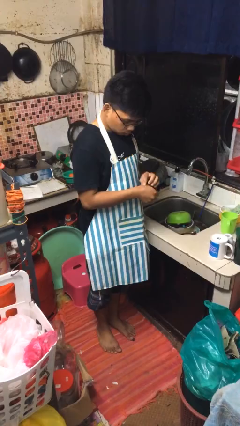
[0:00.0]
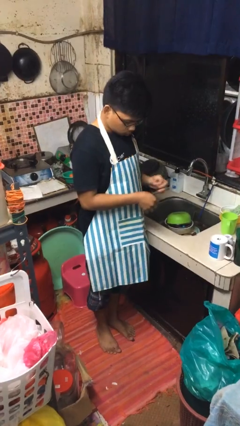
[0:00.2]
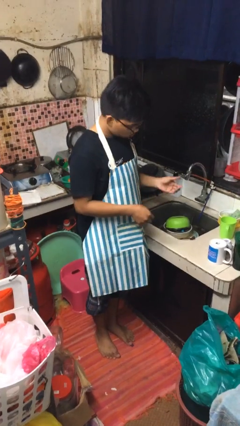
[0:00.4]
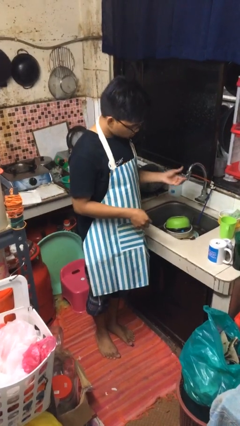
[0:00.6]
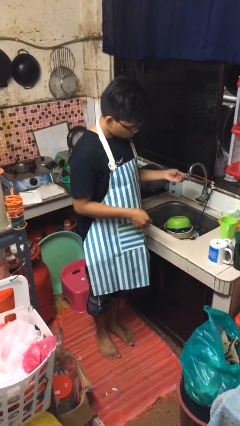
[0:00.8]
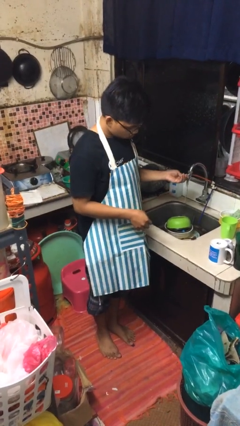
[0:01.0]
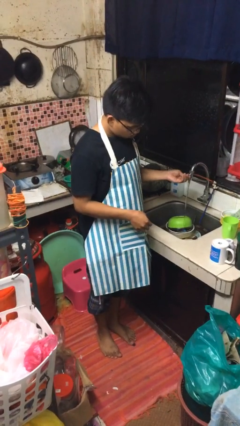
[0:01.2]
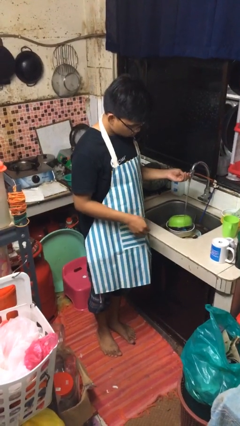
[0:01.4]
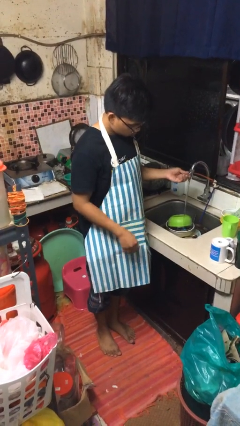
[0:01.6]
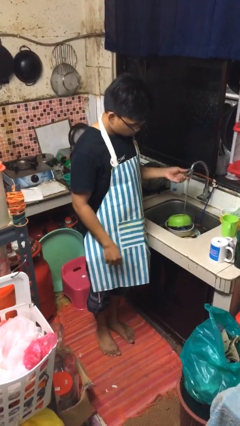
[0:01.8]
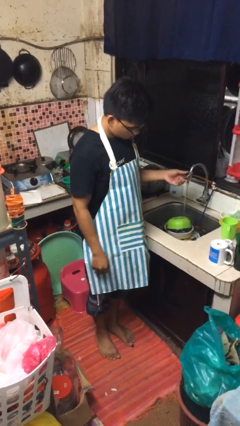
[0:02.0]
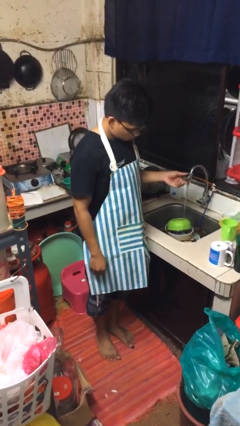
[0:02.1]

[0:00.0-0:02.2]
person turns on faucet

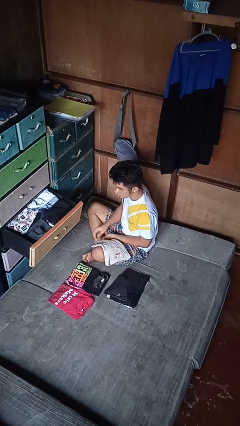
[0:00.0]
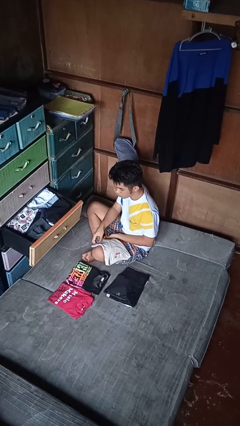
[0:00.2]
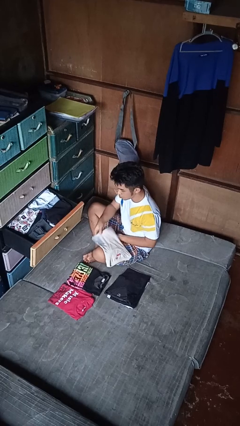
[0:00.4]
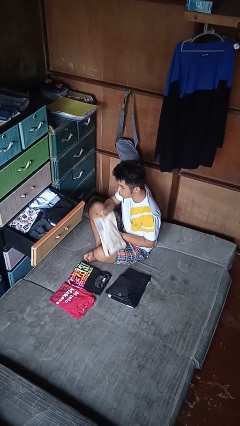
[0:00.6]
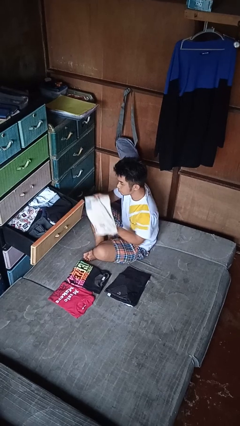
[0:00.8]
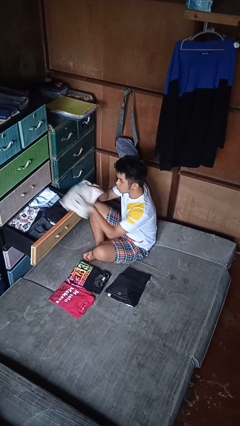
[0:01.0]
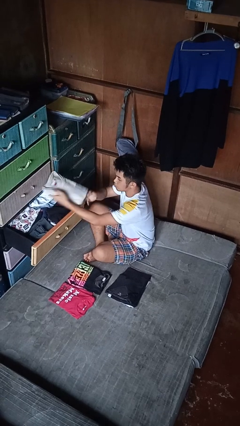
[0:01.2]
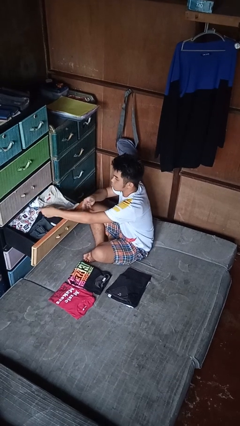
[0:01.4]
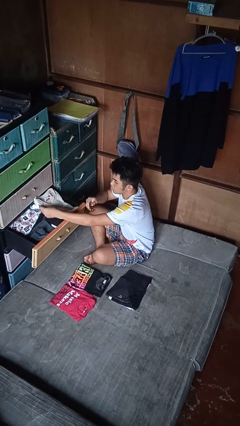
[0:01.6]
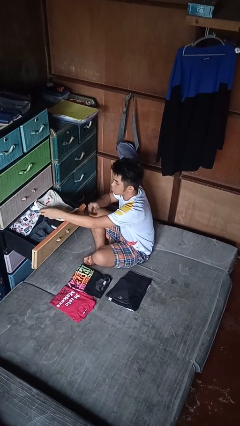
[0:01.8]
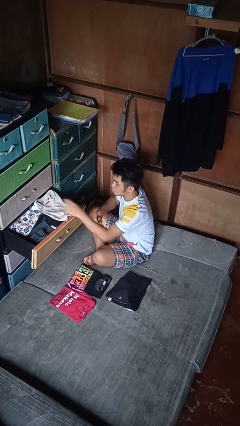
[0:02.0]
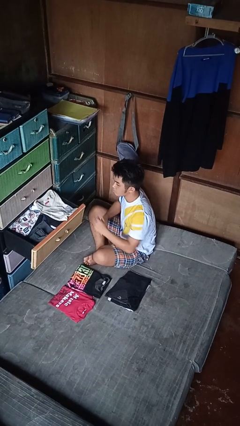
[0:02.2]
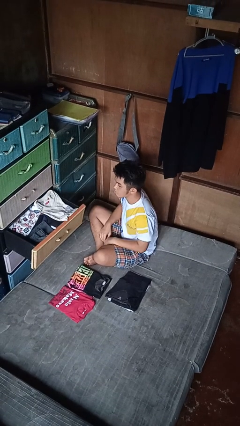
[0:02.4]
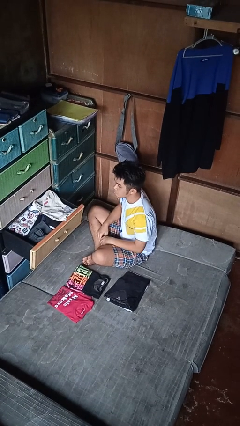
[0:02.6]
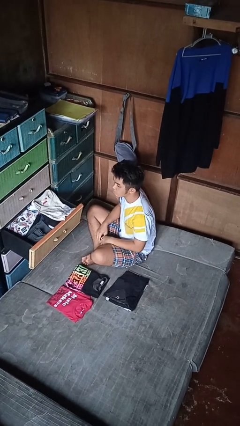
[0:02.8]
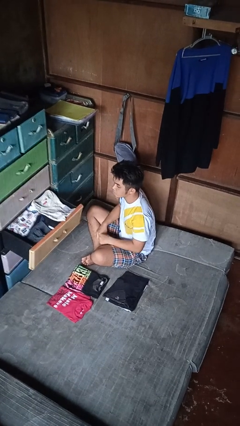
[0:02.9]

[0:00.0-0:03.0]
person puts clothes into dresser

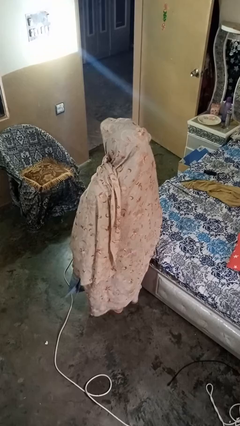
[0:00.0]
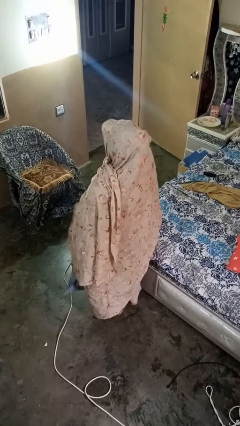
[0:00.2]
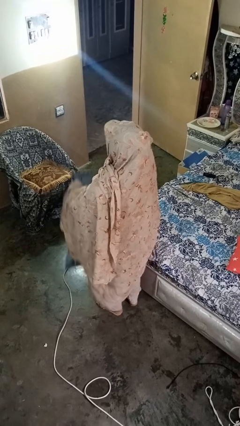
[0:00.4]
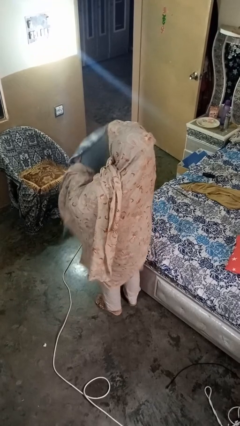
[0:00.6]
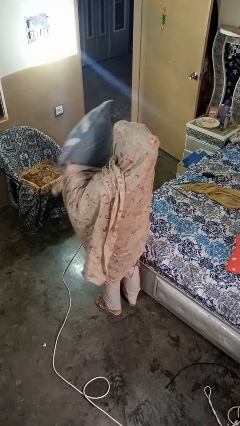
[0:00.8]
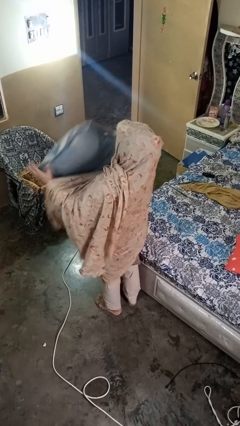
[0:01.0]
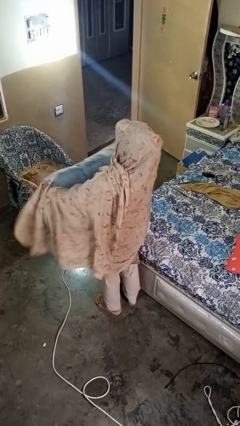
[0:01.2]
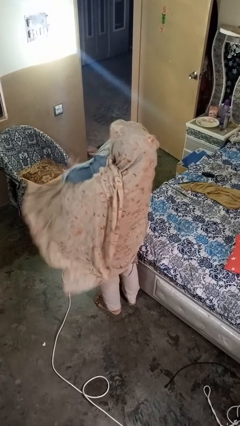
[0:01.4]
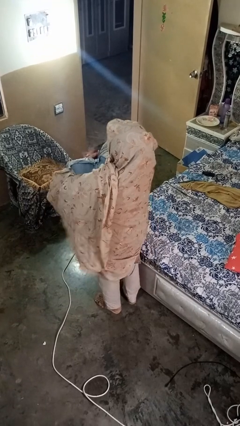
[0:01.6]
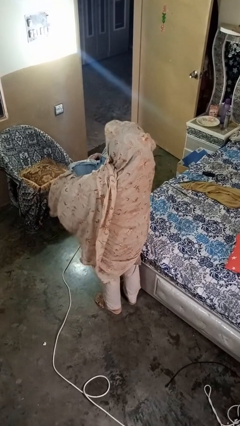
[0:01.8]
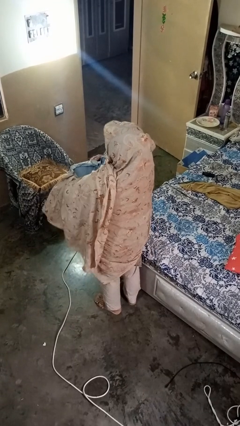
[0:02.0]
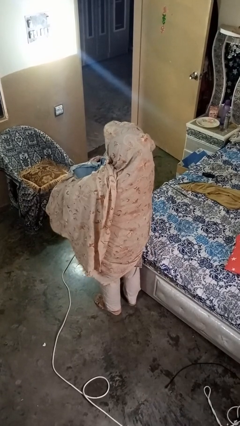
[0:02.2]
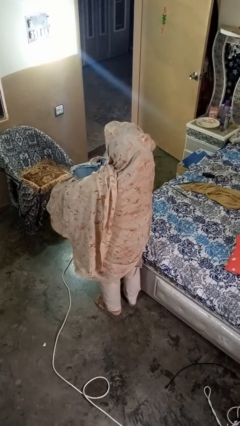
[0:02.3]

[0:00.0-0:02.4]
person squeezes object

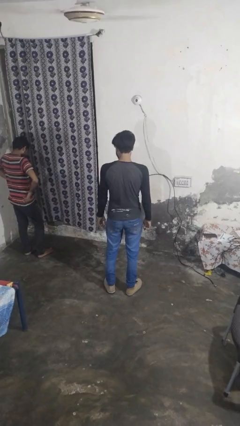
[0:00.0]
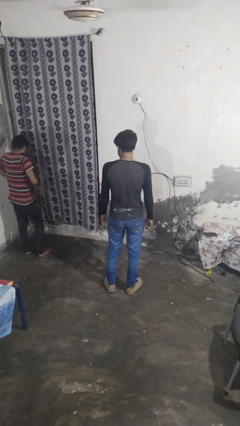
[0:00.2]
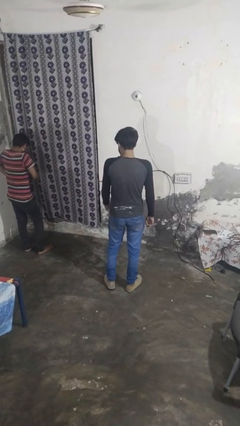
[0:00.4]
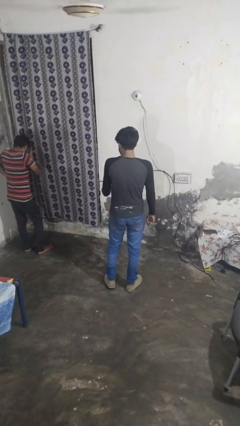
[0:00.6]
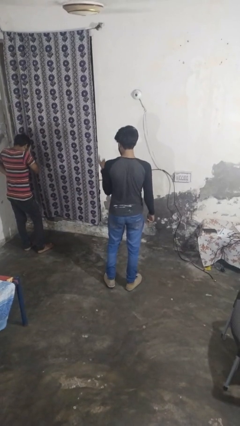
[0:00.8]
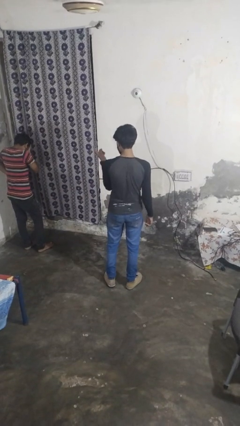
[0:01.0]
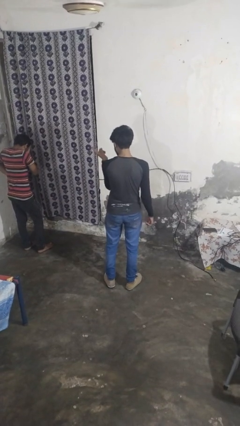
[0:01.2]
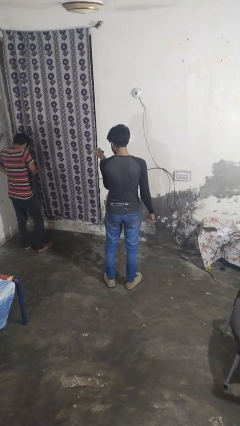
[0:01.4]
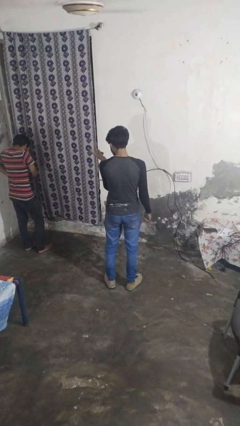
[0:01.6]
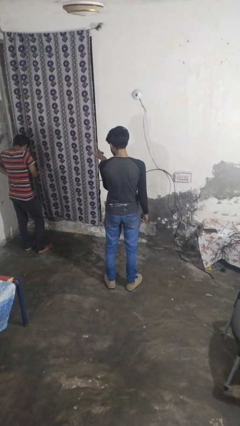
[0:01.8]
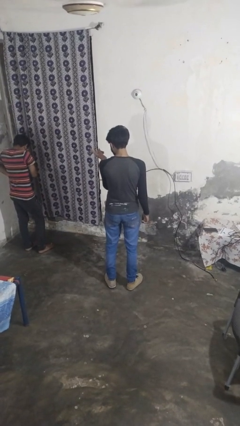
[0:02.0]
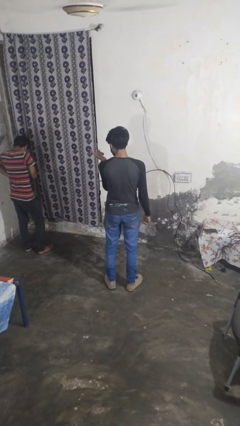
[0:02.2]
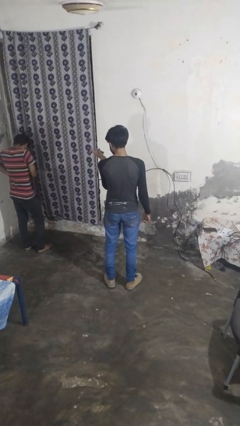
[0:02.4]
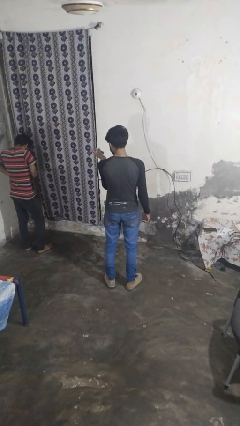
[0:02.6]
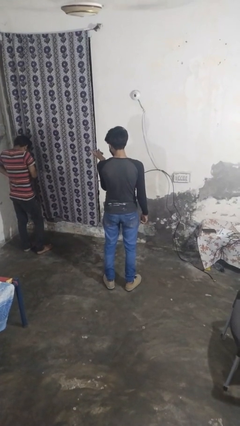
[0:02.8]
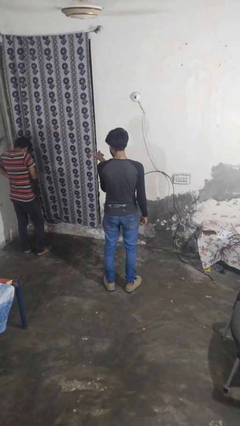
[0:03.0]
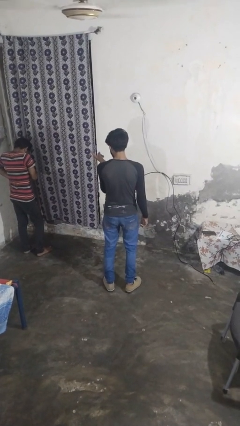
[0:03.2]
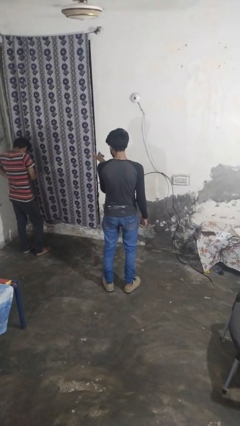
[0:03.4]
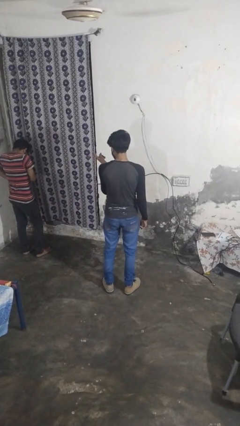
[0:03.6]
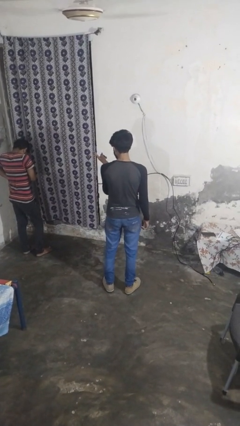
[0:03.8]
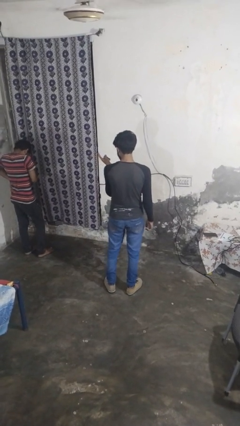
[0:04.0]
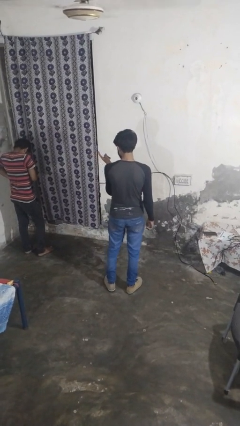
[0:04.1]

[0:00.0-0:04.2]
person points at person

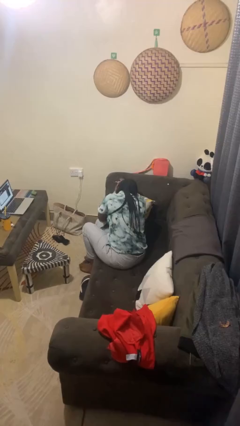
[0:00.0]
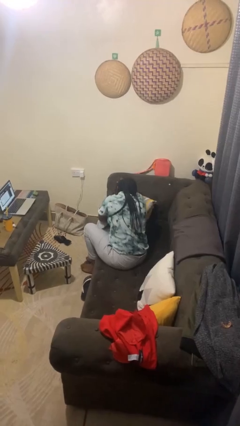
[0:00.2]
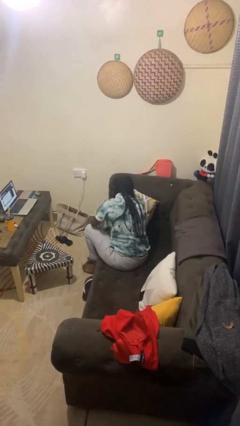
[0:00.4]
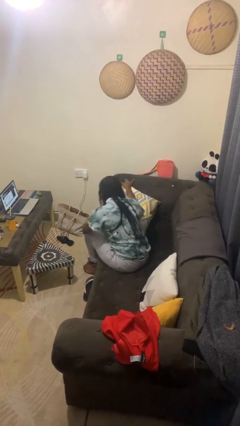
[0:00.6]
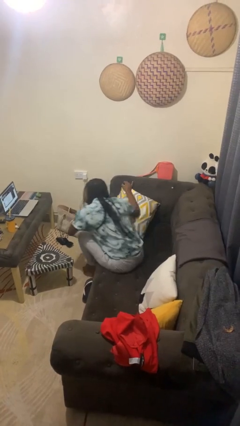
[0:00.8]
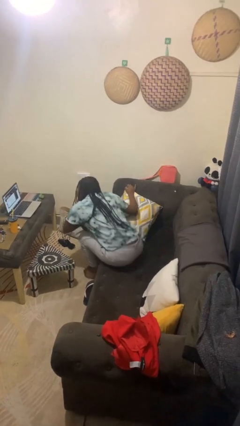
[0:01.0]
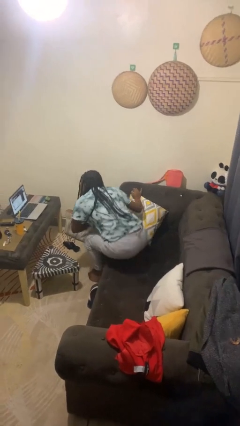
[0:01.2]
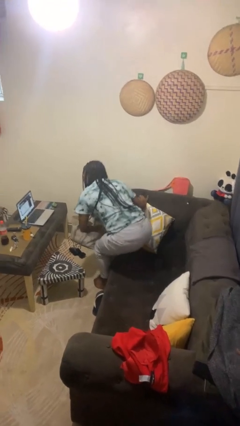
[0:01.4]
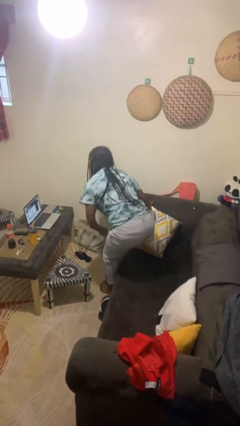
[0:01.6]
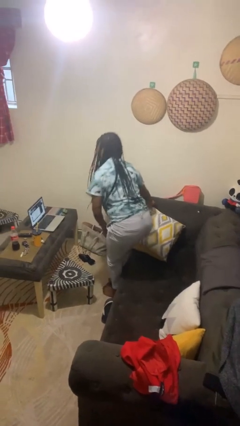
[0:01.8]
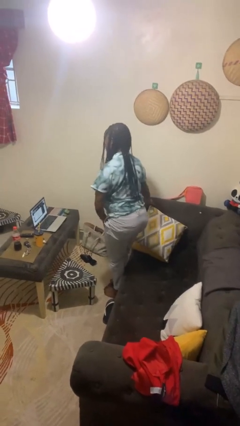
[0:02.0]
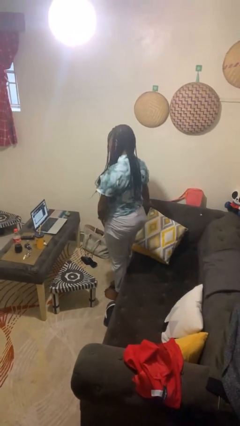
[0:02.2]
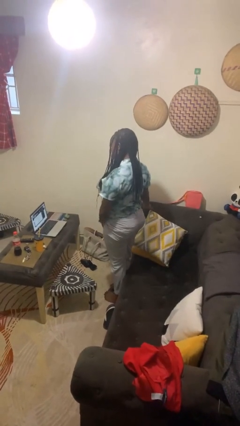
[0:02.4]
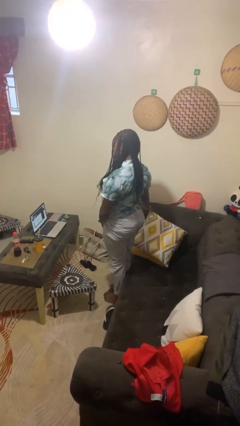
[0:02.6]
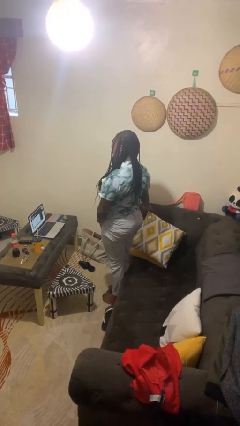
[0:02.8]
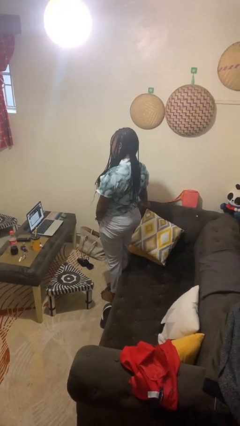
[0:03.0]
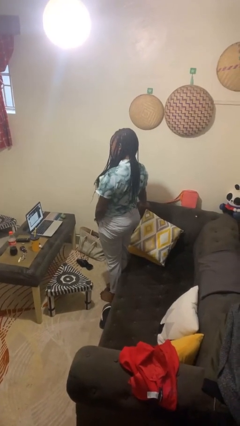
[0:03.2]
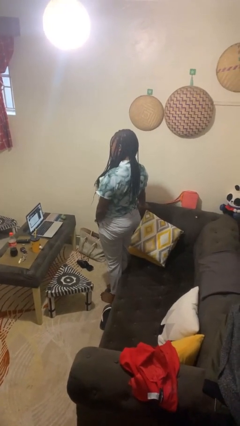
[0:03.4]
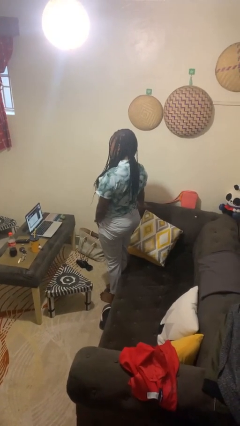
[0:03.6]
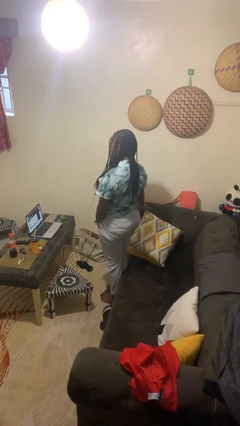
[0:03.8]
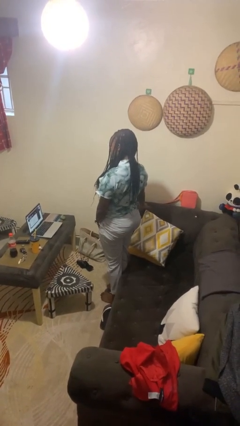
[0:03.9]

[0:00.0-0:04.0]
person stands up

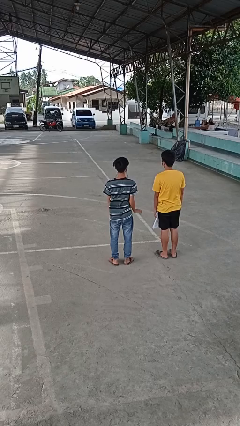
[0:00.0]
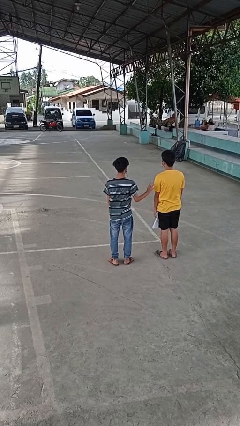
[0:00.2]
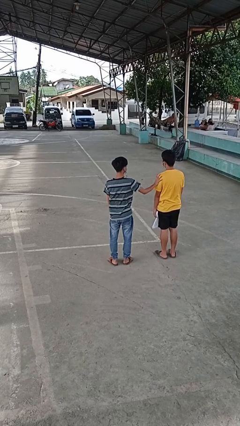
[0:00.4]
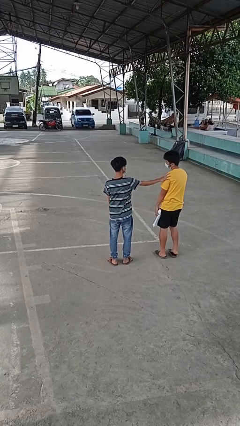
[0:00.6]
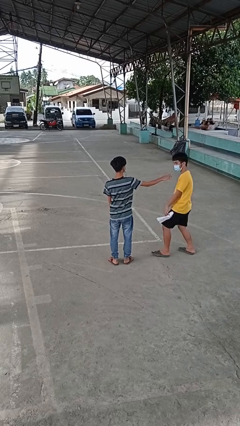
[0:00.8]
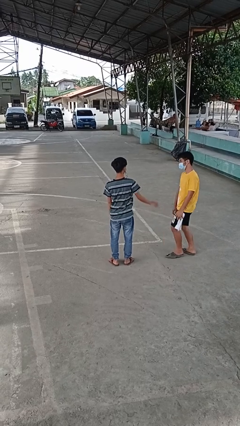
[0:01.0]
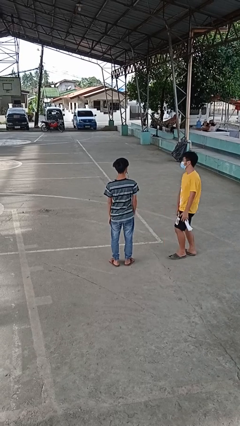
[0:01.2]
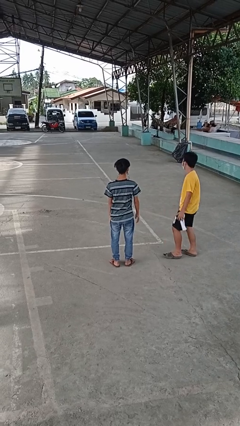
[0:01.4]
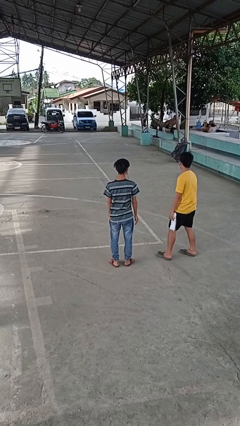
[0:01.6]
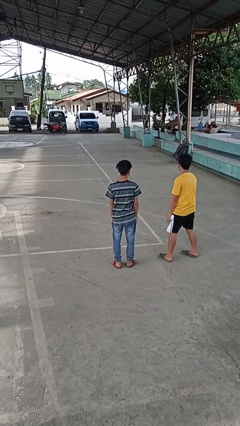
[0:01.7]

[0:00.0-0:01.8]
person shoves person
